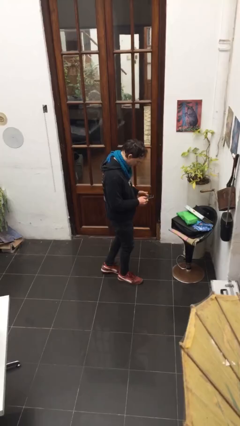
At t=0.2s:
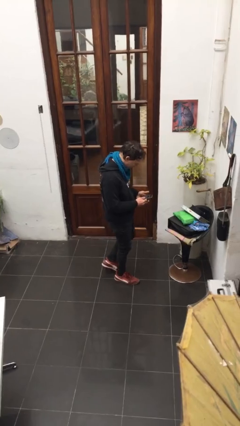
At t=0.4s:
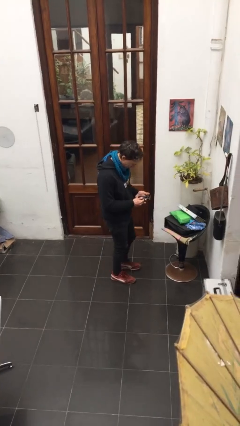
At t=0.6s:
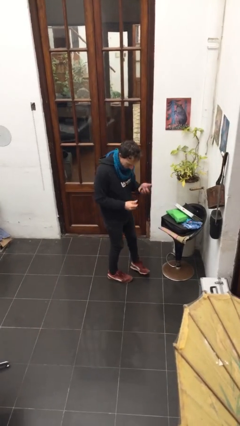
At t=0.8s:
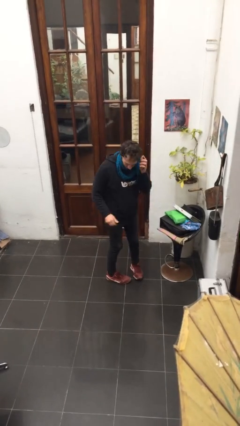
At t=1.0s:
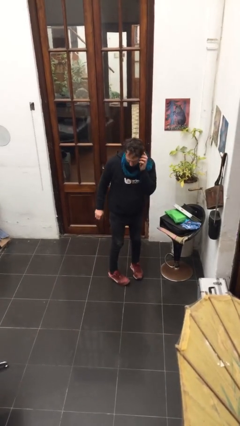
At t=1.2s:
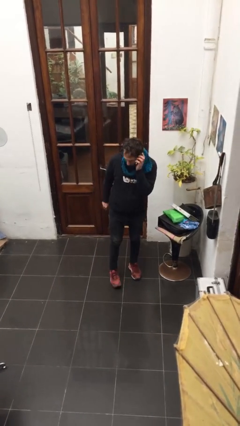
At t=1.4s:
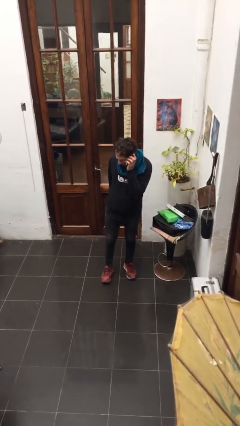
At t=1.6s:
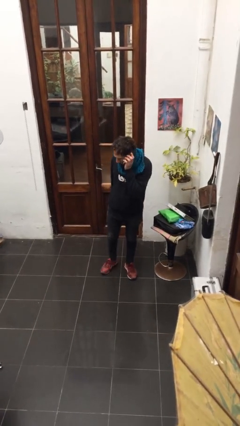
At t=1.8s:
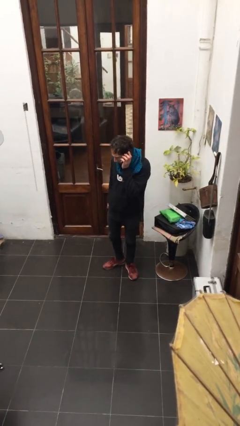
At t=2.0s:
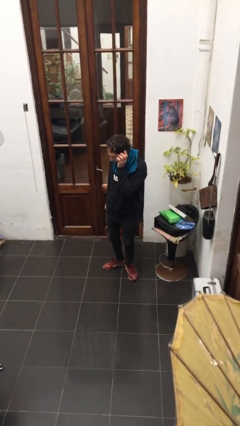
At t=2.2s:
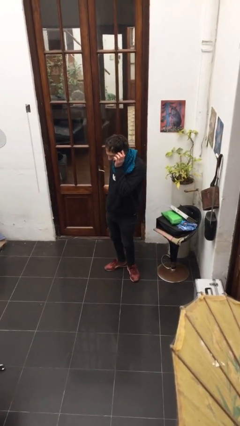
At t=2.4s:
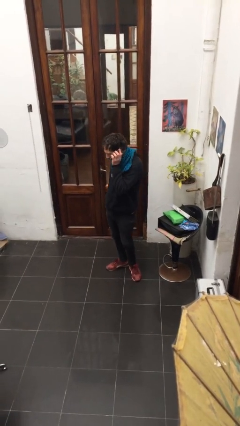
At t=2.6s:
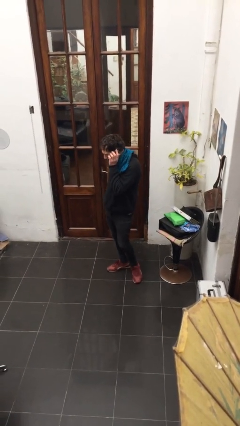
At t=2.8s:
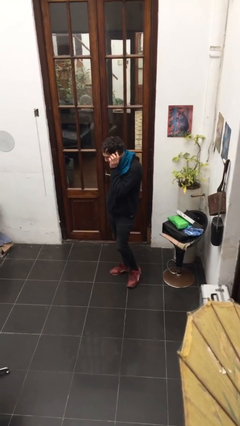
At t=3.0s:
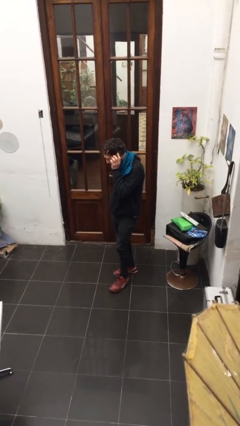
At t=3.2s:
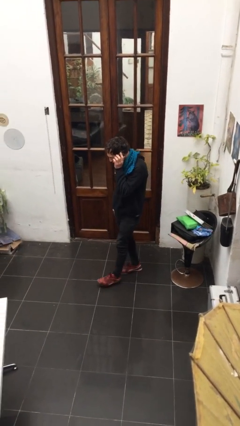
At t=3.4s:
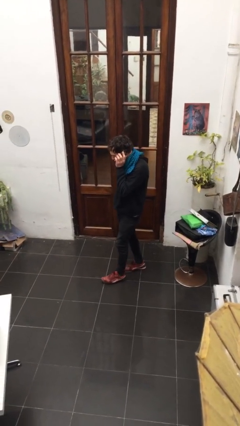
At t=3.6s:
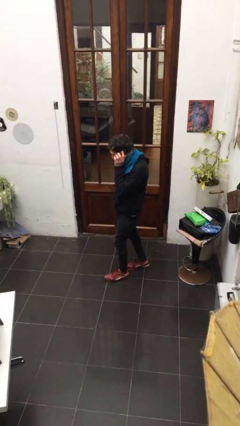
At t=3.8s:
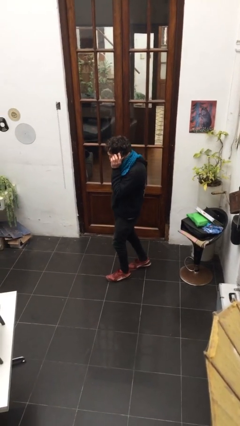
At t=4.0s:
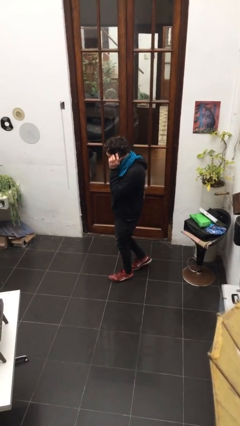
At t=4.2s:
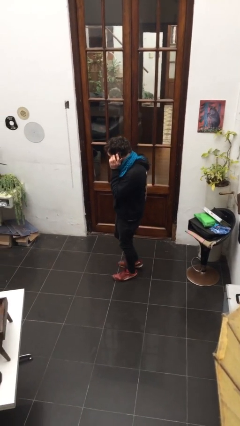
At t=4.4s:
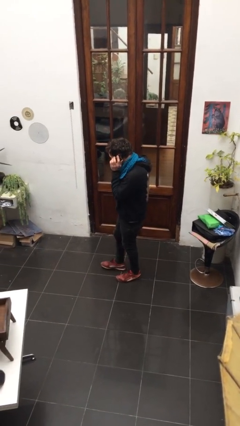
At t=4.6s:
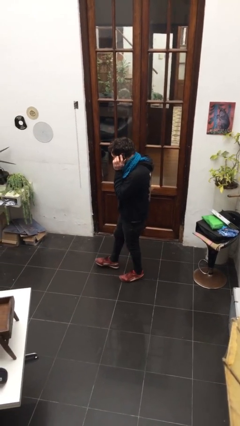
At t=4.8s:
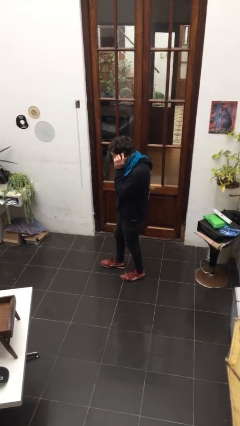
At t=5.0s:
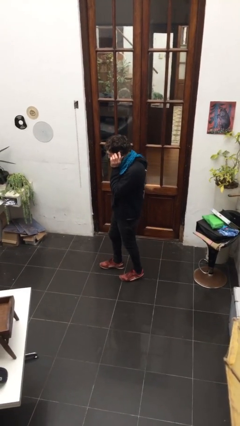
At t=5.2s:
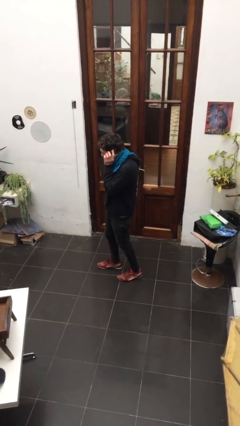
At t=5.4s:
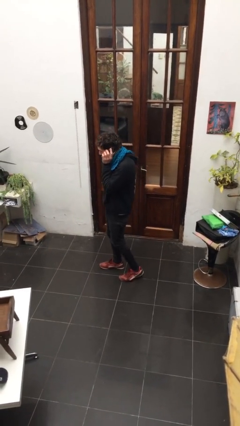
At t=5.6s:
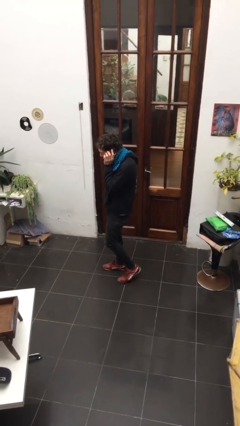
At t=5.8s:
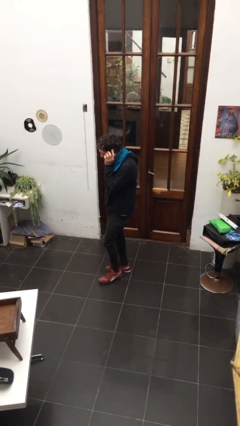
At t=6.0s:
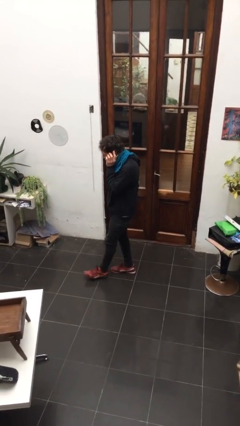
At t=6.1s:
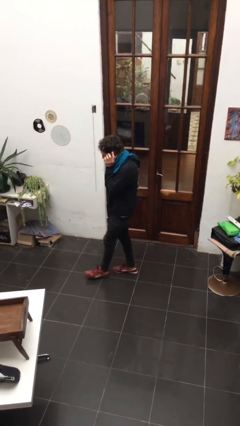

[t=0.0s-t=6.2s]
person talks on phone

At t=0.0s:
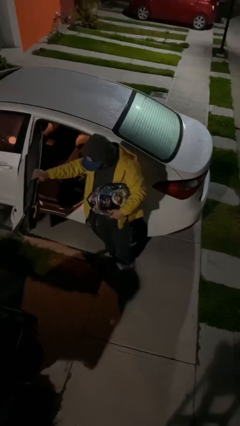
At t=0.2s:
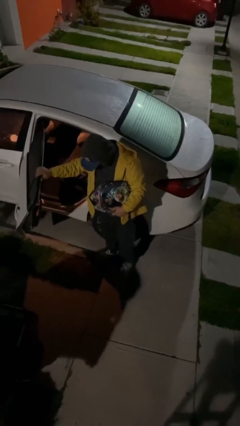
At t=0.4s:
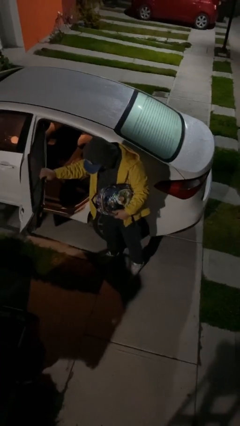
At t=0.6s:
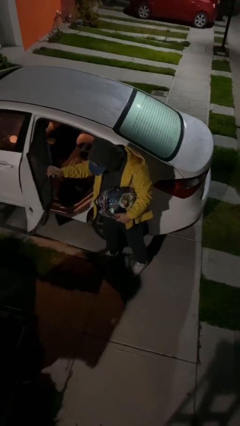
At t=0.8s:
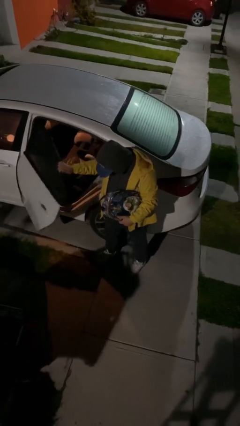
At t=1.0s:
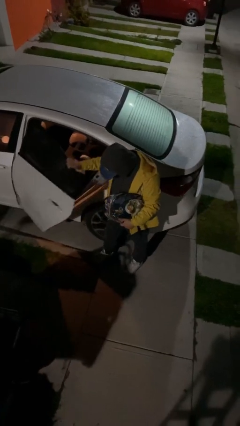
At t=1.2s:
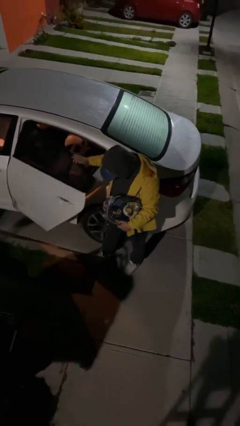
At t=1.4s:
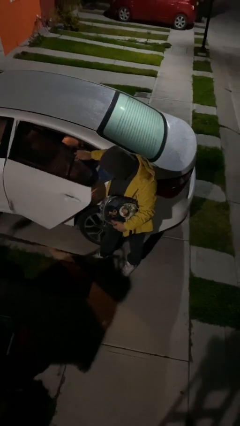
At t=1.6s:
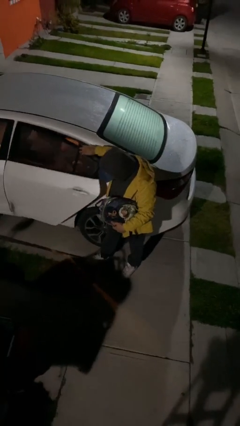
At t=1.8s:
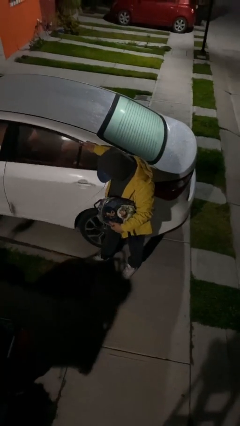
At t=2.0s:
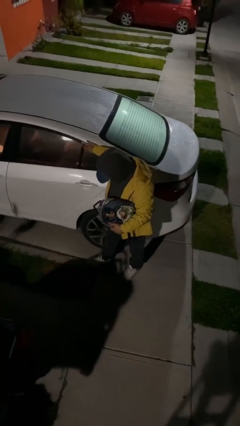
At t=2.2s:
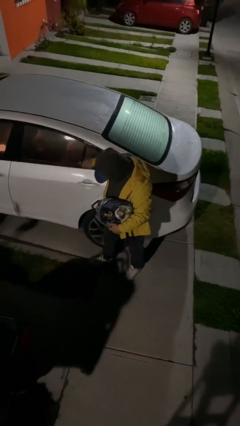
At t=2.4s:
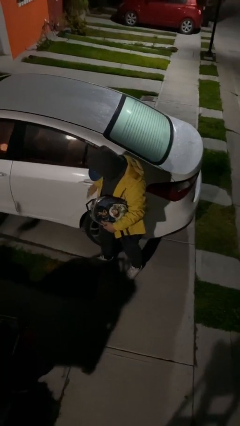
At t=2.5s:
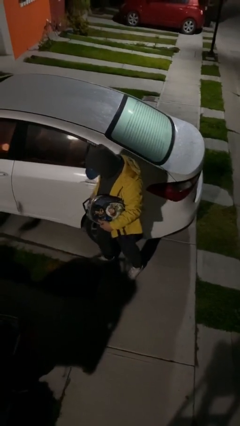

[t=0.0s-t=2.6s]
person closes car door

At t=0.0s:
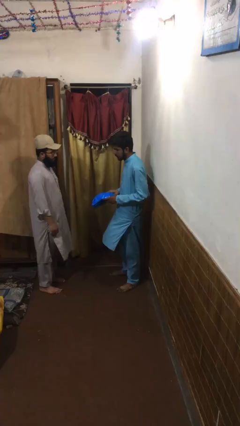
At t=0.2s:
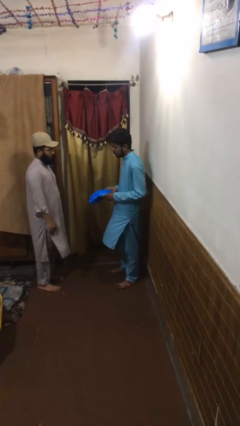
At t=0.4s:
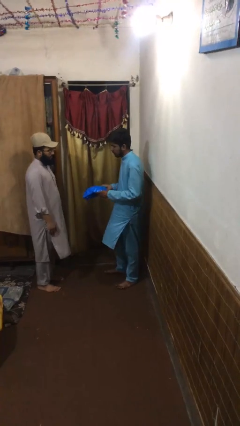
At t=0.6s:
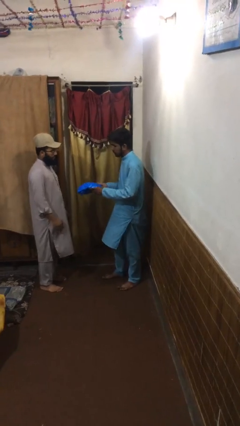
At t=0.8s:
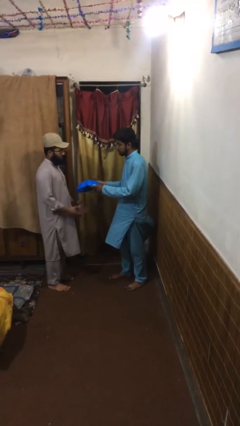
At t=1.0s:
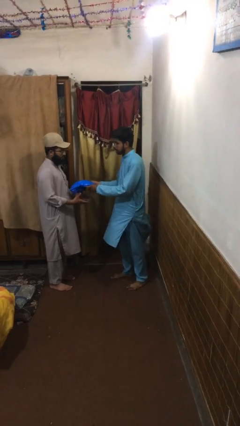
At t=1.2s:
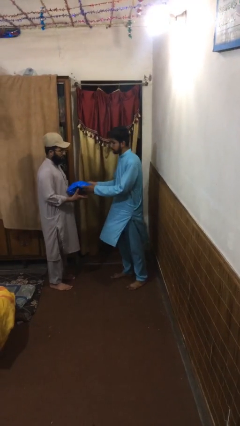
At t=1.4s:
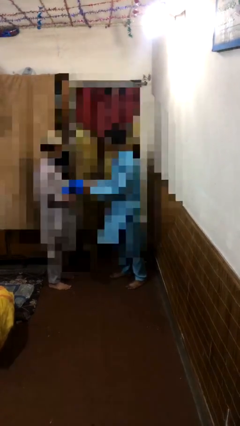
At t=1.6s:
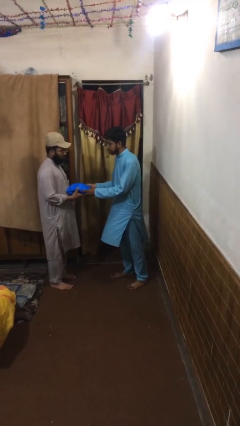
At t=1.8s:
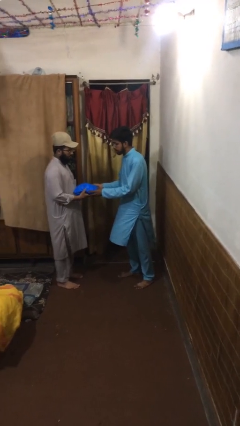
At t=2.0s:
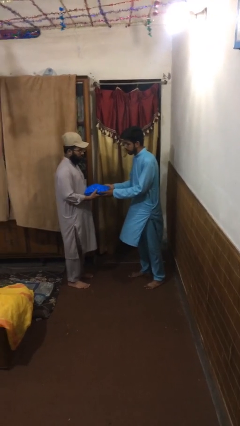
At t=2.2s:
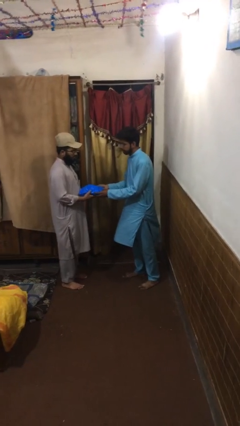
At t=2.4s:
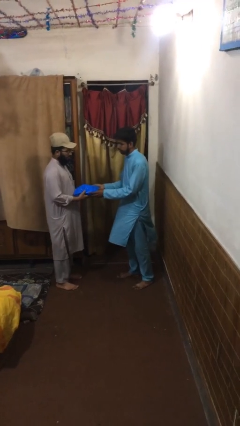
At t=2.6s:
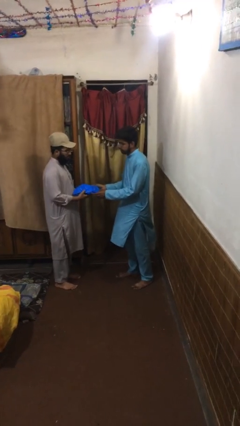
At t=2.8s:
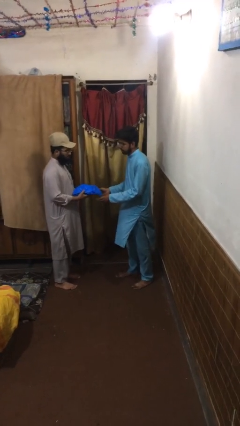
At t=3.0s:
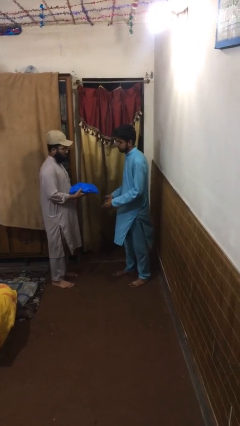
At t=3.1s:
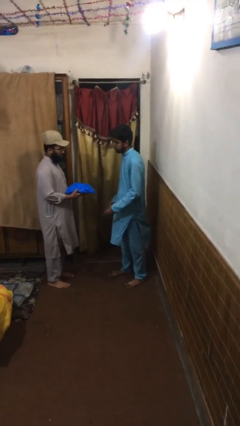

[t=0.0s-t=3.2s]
person transfers object to person

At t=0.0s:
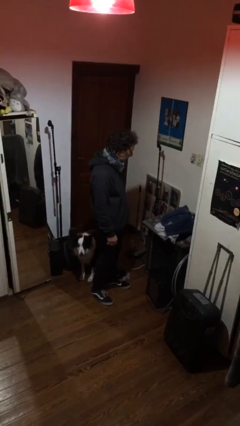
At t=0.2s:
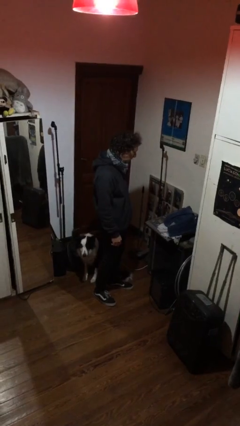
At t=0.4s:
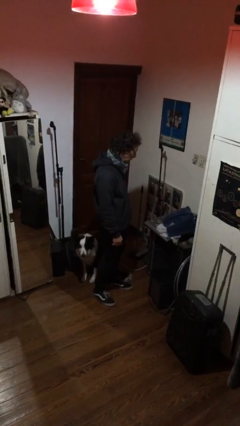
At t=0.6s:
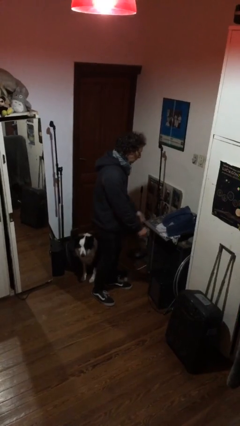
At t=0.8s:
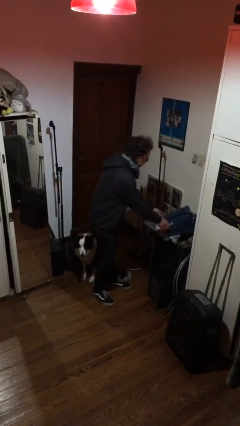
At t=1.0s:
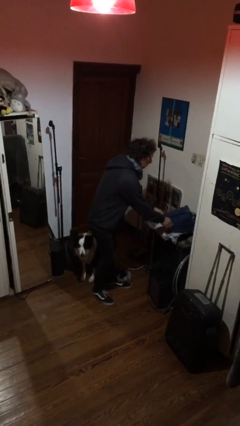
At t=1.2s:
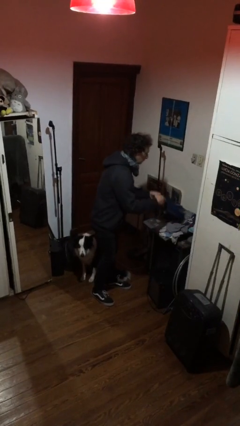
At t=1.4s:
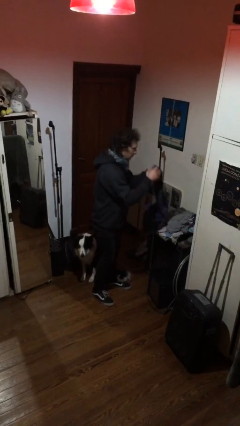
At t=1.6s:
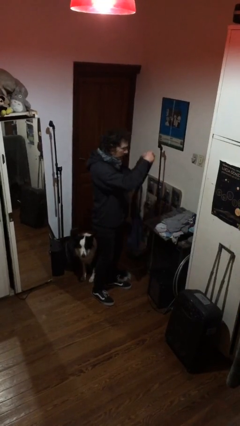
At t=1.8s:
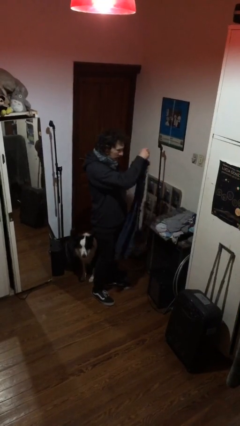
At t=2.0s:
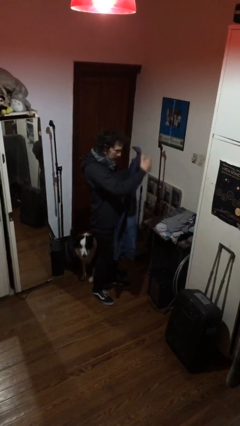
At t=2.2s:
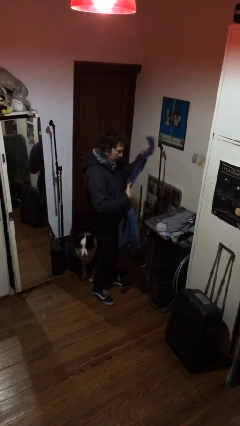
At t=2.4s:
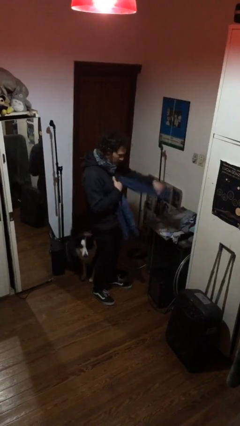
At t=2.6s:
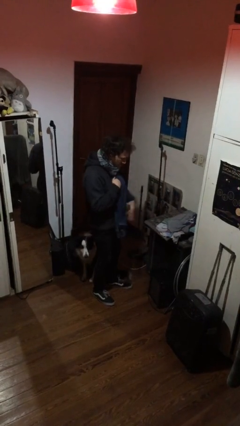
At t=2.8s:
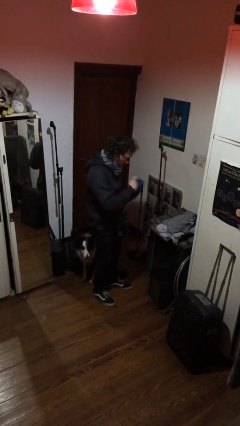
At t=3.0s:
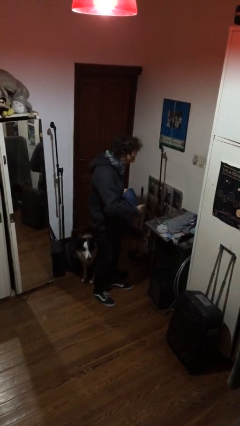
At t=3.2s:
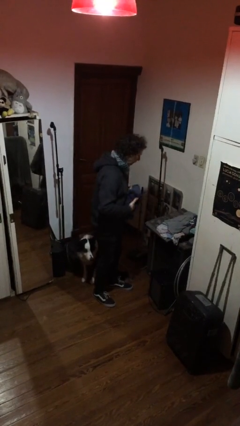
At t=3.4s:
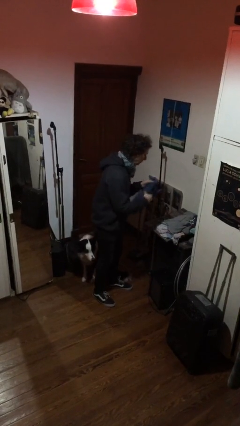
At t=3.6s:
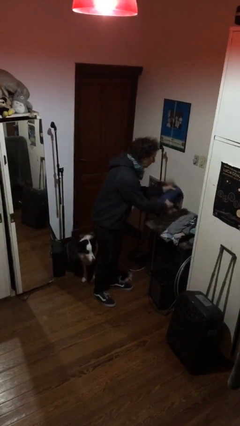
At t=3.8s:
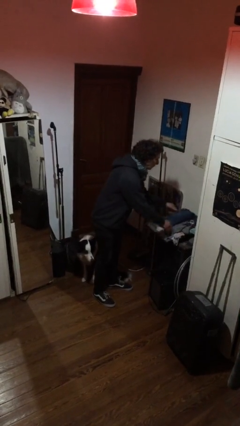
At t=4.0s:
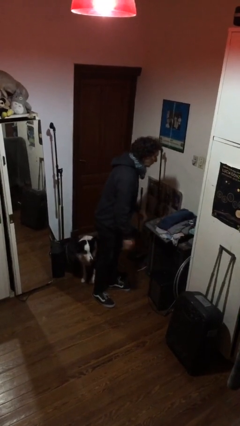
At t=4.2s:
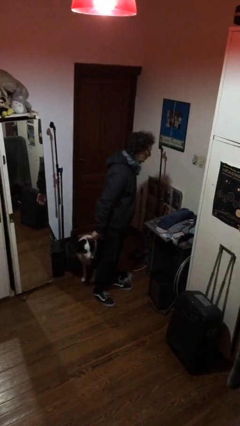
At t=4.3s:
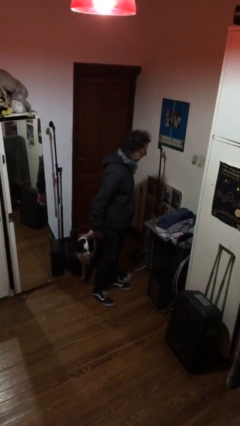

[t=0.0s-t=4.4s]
person folds pants

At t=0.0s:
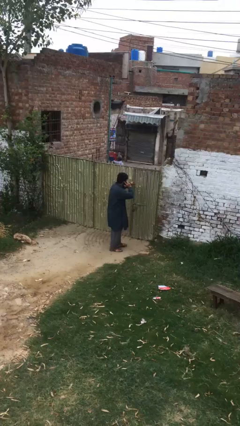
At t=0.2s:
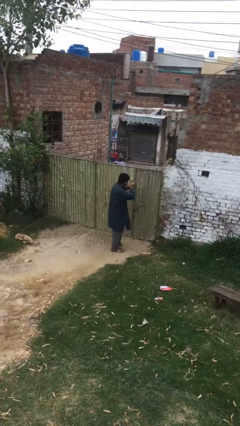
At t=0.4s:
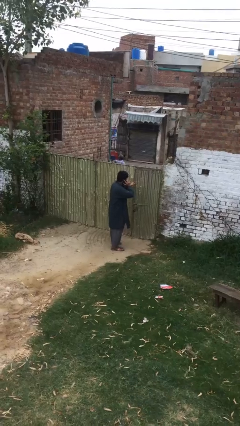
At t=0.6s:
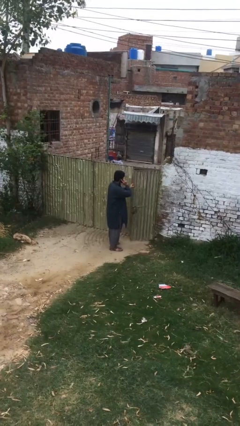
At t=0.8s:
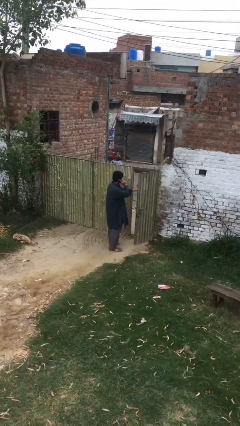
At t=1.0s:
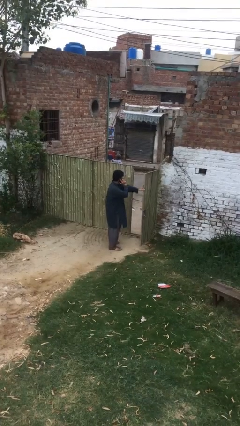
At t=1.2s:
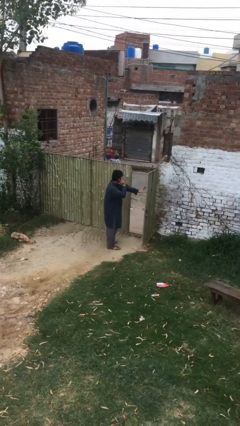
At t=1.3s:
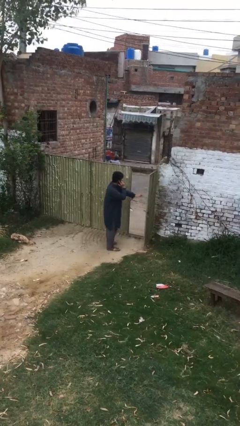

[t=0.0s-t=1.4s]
person opens facility door
